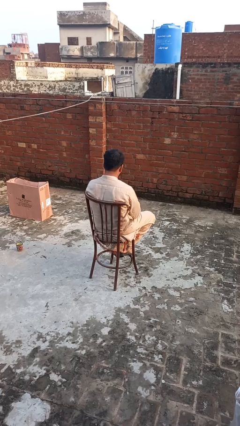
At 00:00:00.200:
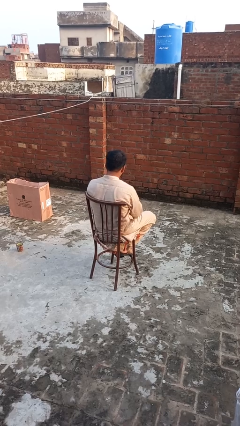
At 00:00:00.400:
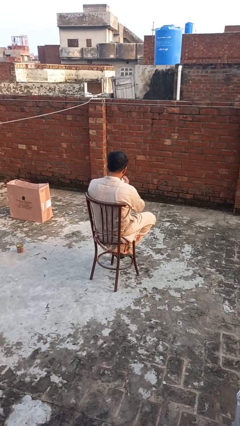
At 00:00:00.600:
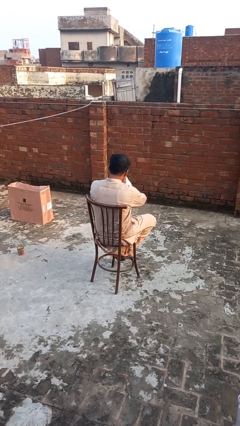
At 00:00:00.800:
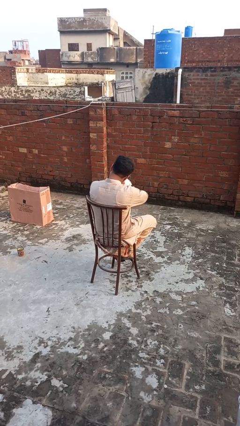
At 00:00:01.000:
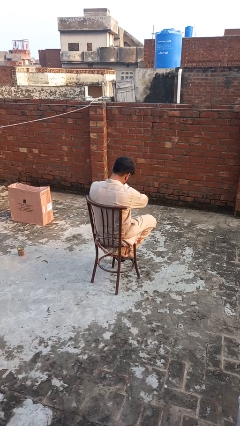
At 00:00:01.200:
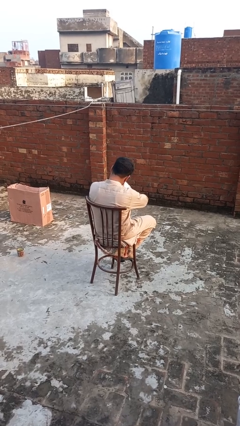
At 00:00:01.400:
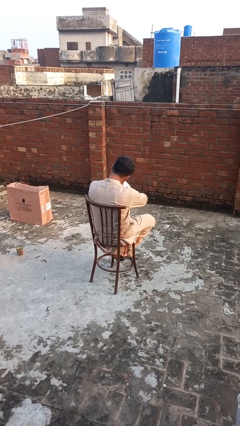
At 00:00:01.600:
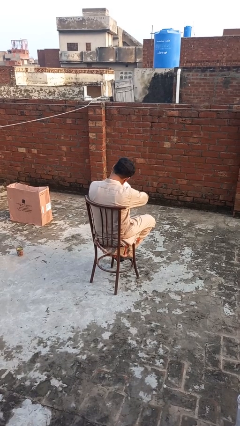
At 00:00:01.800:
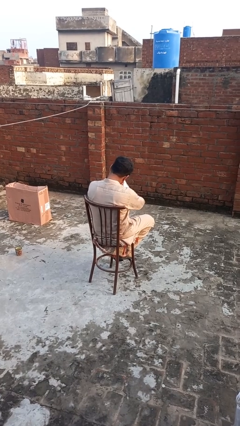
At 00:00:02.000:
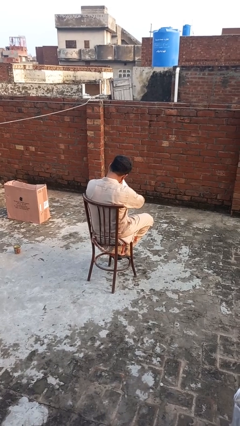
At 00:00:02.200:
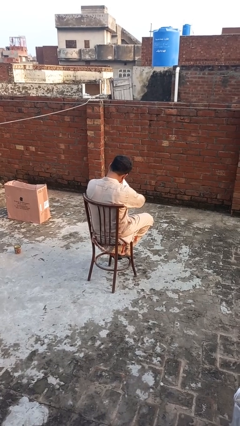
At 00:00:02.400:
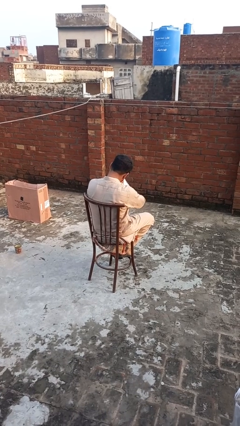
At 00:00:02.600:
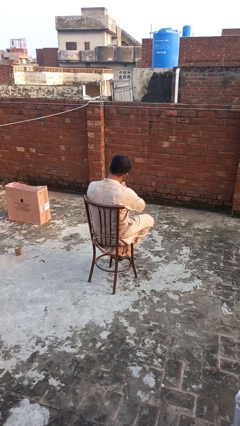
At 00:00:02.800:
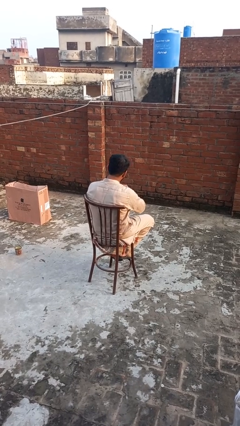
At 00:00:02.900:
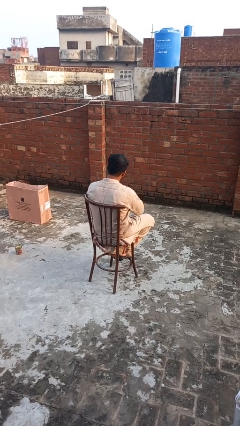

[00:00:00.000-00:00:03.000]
person blows nose

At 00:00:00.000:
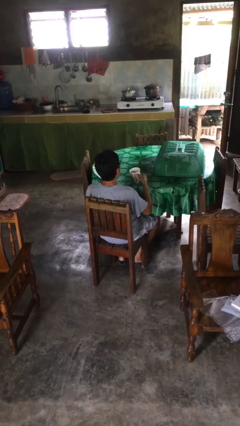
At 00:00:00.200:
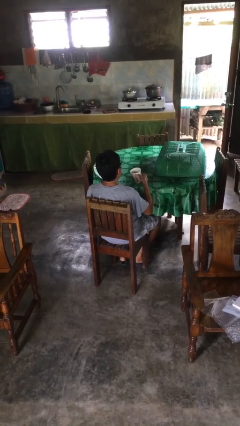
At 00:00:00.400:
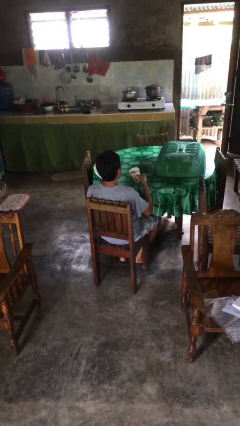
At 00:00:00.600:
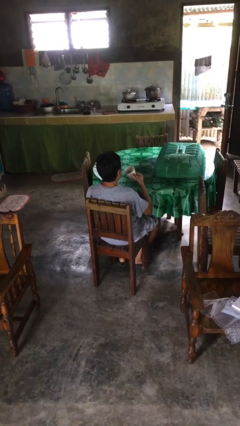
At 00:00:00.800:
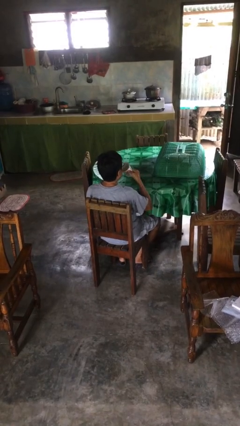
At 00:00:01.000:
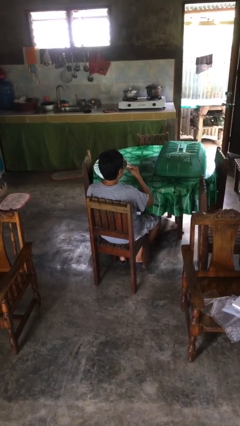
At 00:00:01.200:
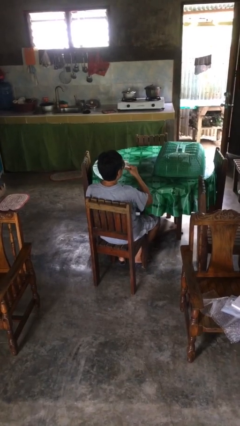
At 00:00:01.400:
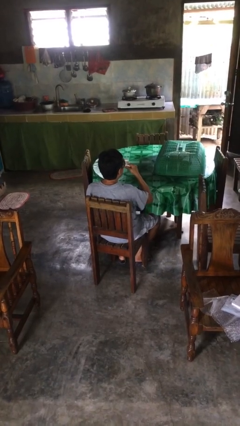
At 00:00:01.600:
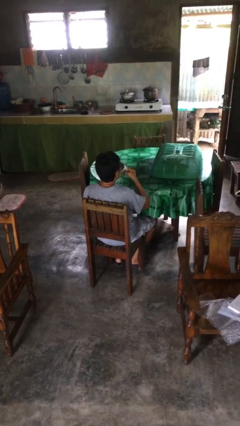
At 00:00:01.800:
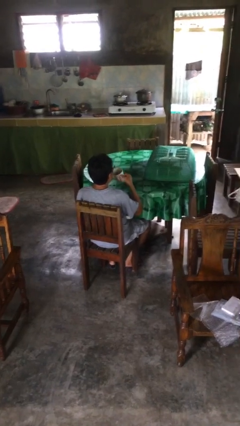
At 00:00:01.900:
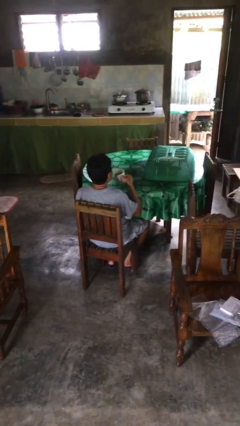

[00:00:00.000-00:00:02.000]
person drinks from mug

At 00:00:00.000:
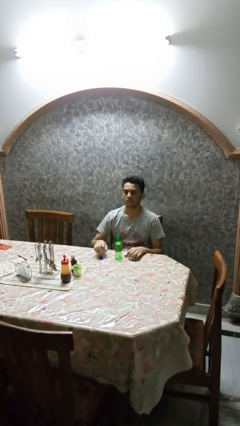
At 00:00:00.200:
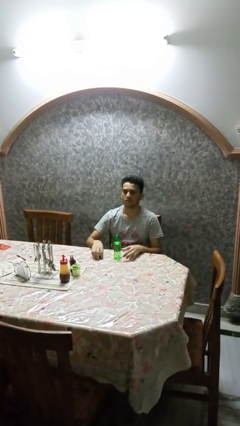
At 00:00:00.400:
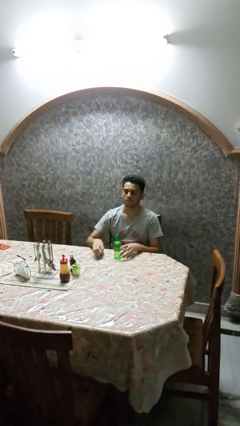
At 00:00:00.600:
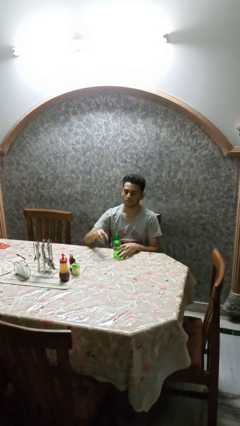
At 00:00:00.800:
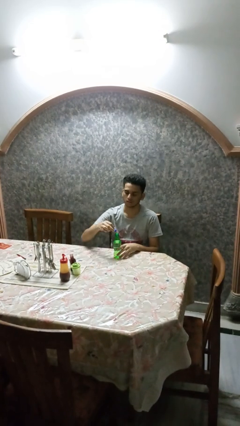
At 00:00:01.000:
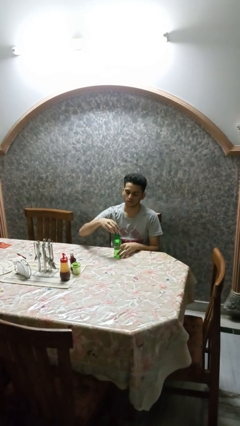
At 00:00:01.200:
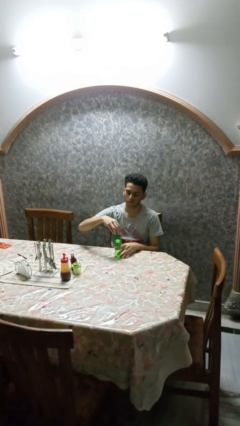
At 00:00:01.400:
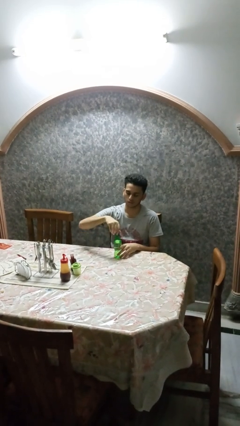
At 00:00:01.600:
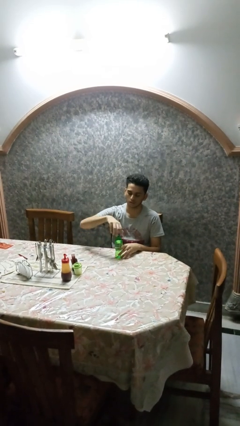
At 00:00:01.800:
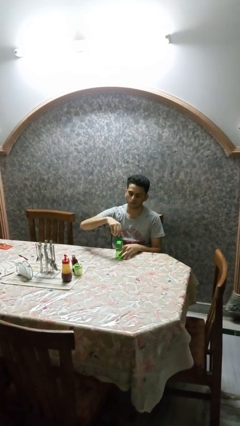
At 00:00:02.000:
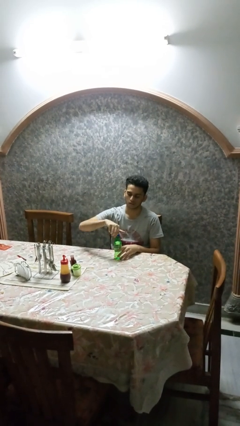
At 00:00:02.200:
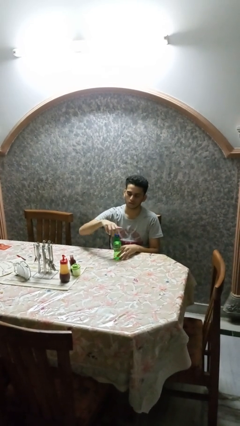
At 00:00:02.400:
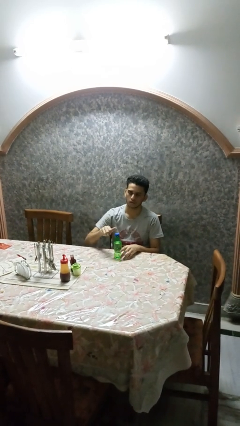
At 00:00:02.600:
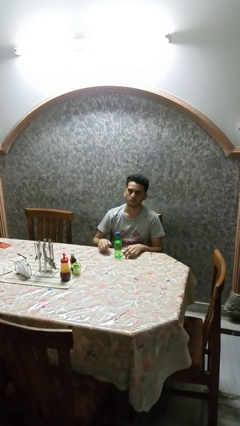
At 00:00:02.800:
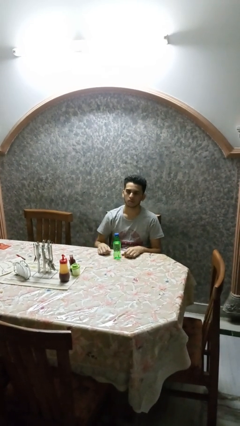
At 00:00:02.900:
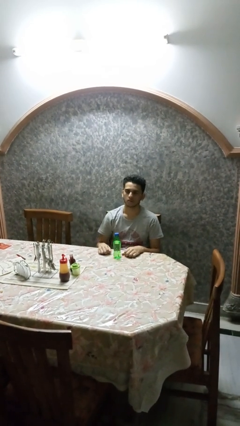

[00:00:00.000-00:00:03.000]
person screws lid to bottle

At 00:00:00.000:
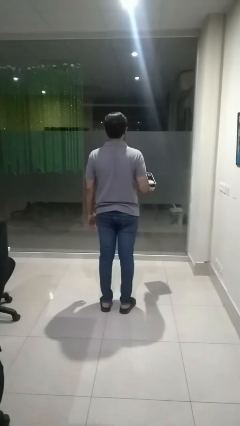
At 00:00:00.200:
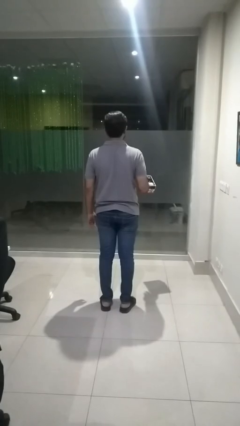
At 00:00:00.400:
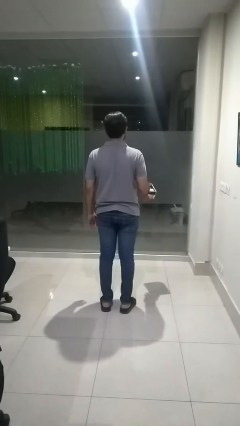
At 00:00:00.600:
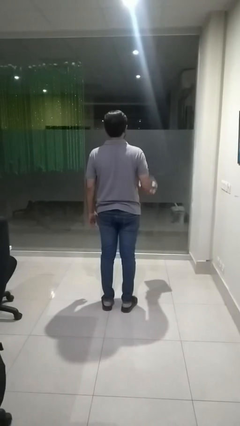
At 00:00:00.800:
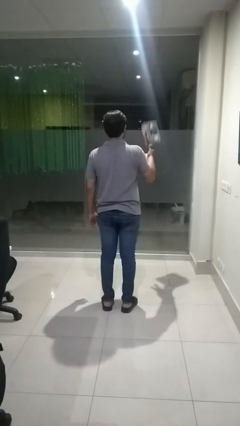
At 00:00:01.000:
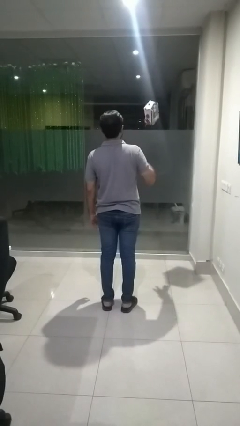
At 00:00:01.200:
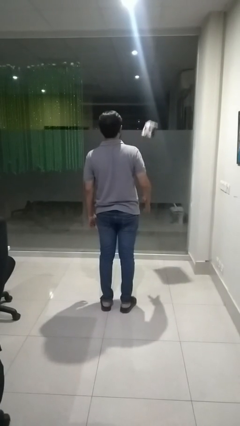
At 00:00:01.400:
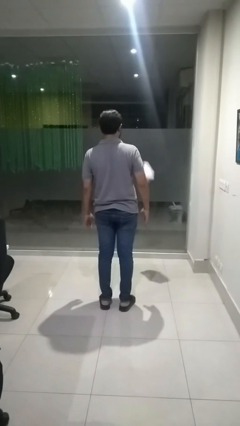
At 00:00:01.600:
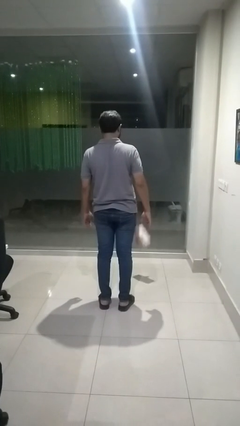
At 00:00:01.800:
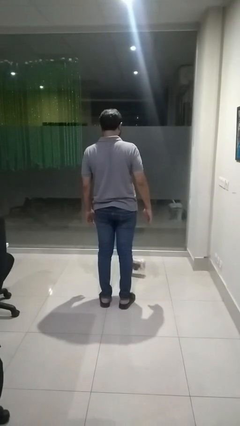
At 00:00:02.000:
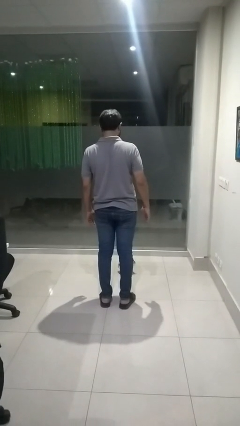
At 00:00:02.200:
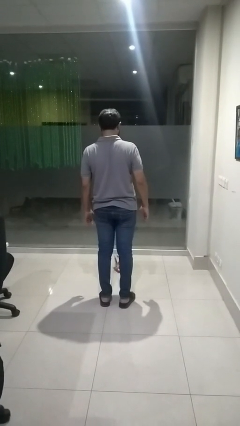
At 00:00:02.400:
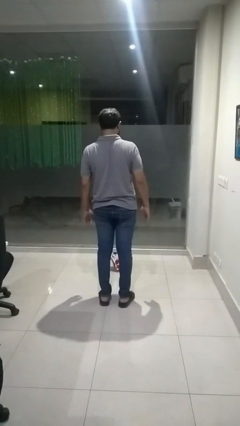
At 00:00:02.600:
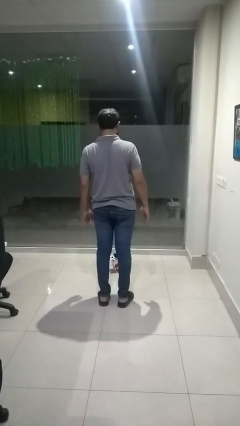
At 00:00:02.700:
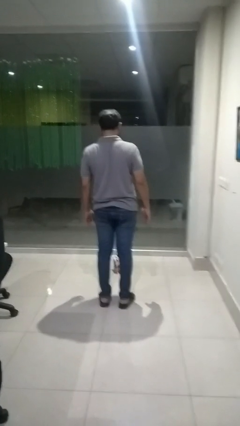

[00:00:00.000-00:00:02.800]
person throws object into air

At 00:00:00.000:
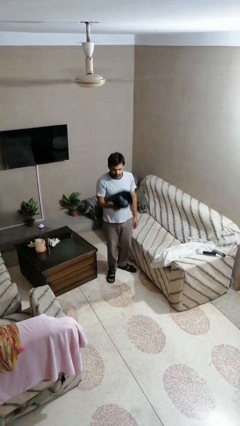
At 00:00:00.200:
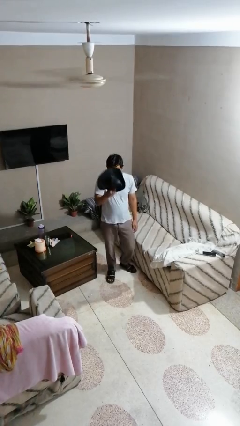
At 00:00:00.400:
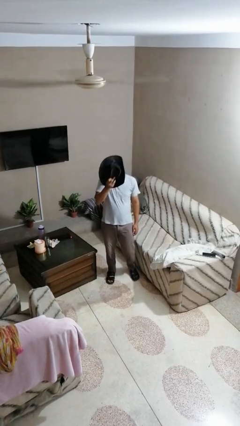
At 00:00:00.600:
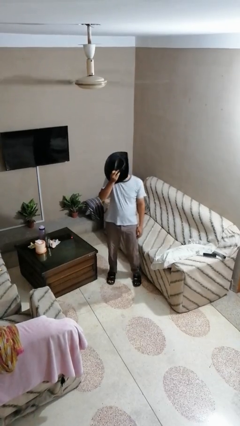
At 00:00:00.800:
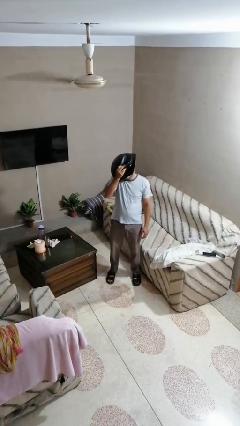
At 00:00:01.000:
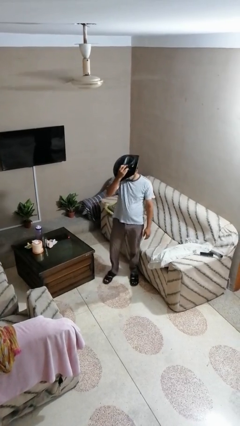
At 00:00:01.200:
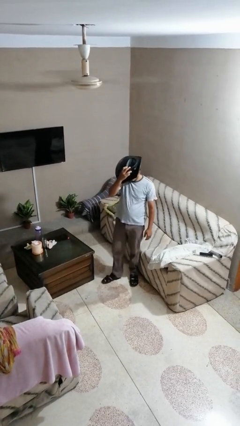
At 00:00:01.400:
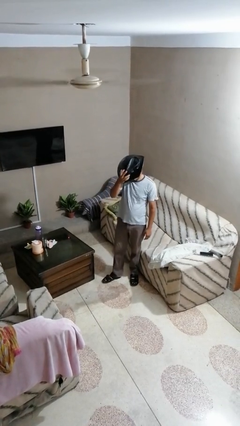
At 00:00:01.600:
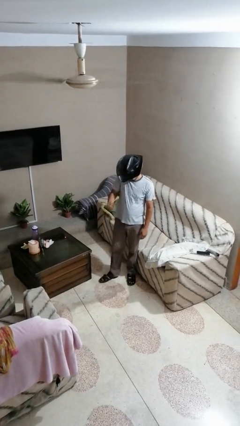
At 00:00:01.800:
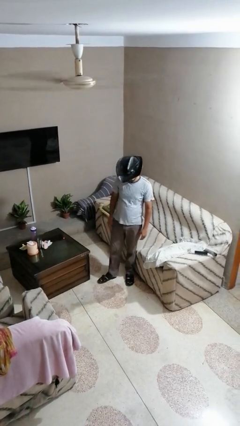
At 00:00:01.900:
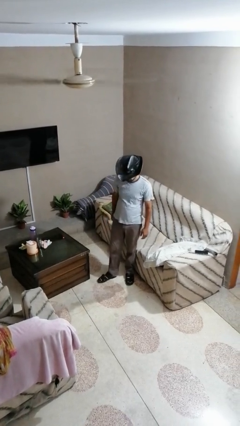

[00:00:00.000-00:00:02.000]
person puts on hat

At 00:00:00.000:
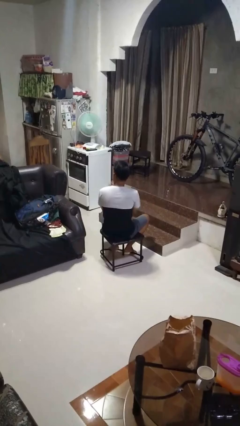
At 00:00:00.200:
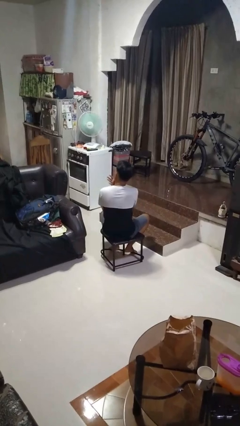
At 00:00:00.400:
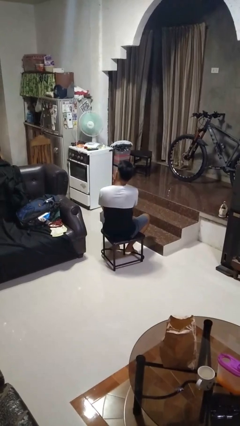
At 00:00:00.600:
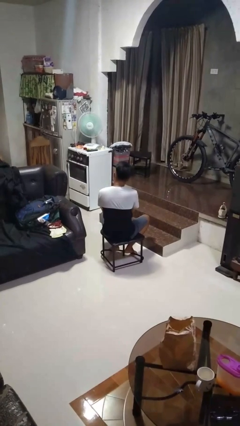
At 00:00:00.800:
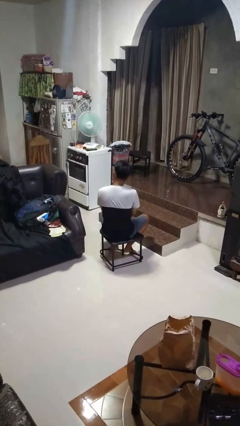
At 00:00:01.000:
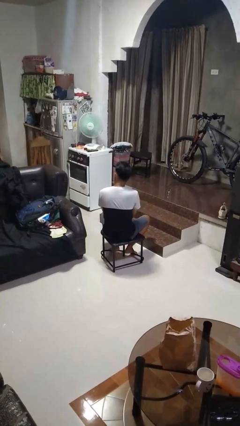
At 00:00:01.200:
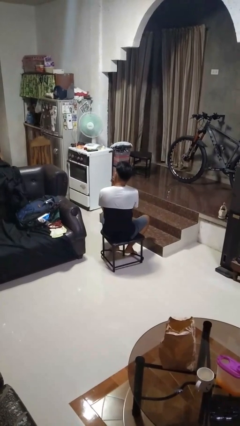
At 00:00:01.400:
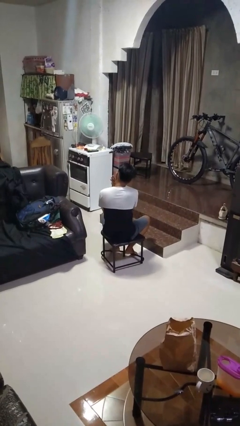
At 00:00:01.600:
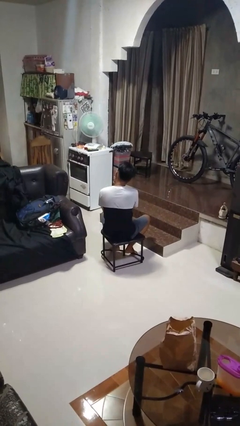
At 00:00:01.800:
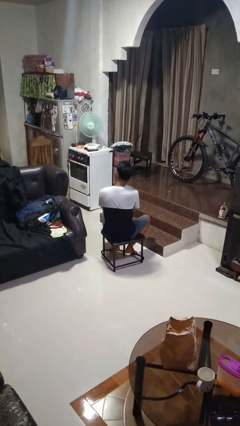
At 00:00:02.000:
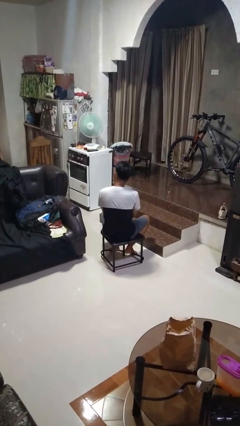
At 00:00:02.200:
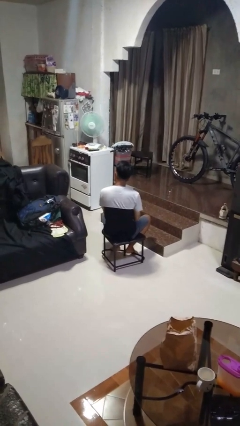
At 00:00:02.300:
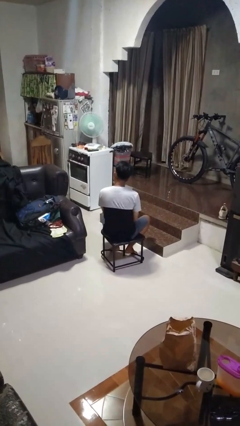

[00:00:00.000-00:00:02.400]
person strokes chin

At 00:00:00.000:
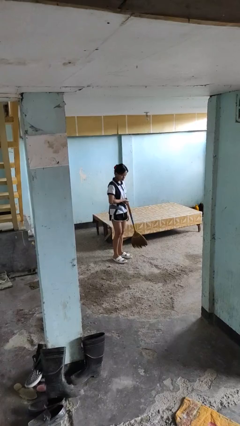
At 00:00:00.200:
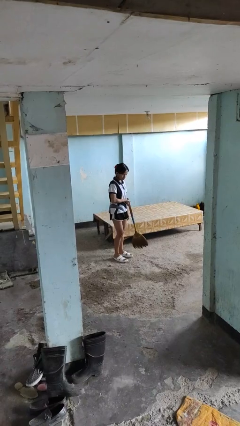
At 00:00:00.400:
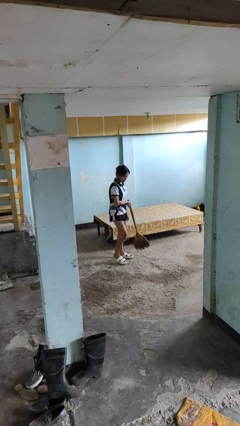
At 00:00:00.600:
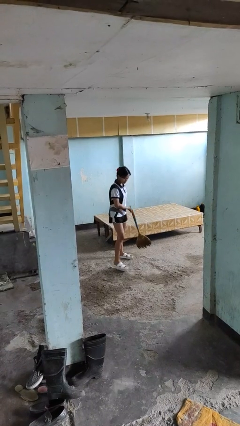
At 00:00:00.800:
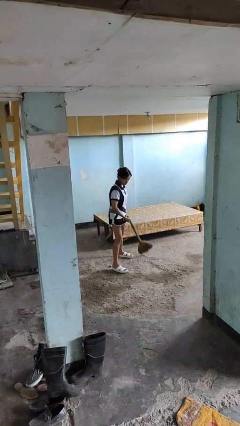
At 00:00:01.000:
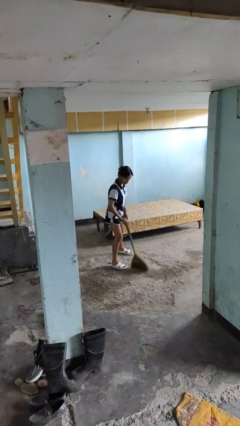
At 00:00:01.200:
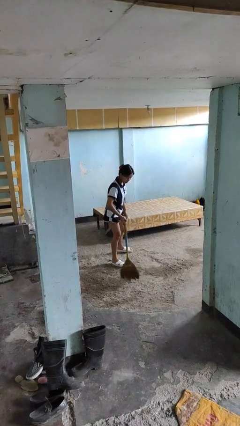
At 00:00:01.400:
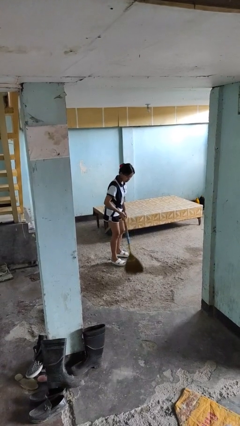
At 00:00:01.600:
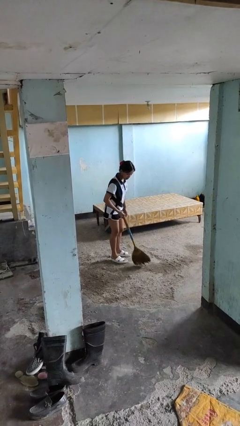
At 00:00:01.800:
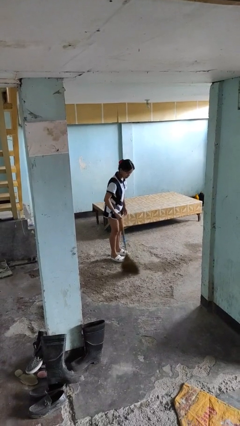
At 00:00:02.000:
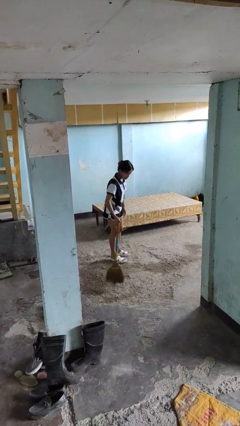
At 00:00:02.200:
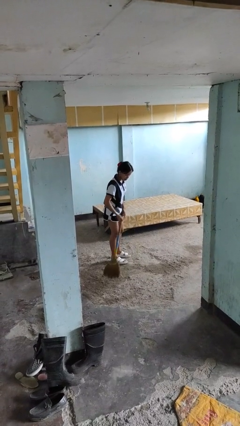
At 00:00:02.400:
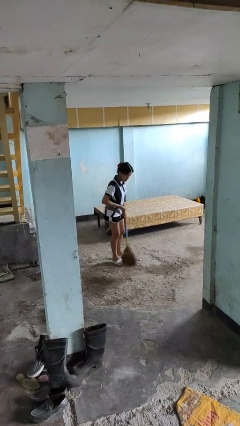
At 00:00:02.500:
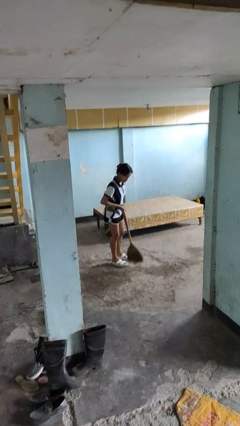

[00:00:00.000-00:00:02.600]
person sweeps floor
